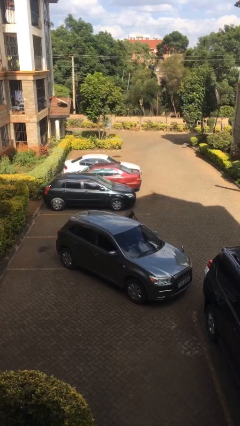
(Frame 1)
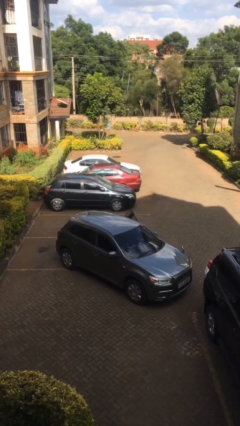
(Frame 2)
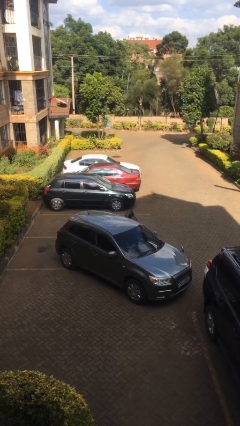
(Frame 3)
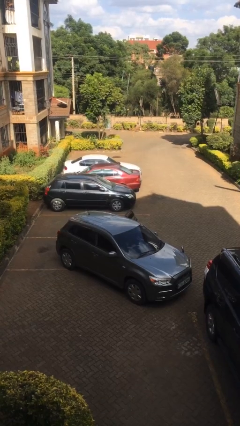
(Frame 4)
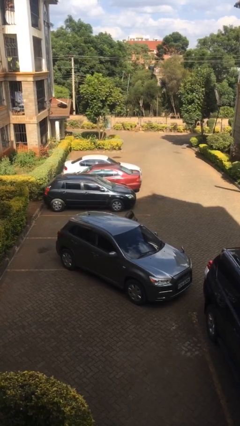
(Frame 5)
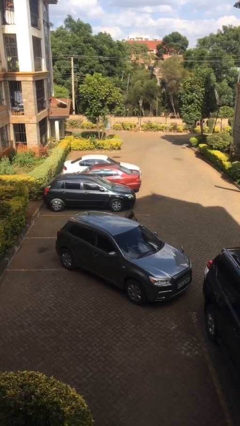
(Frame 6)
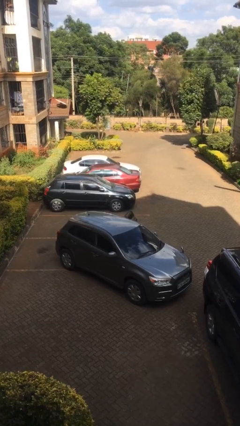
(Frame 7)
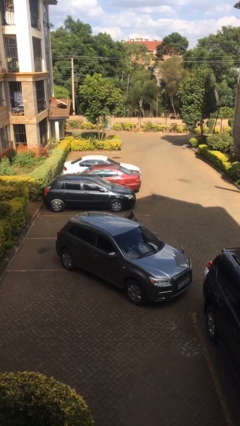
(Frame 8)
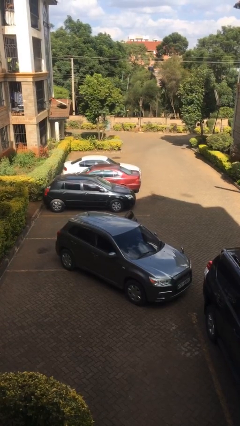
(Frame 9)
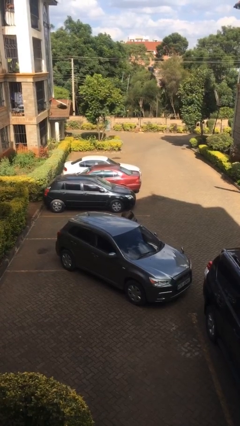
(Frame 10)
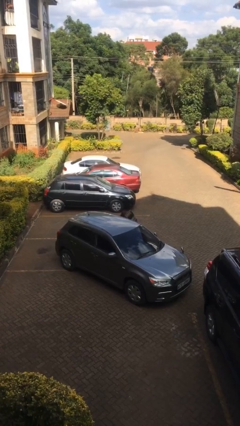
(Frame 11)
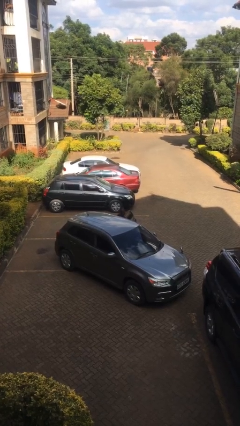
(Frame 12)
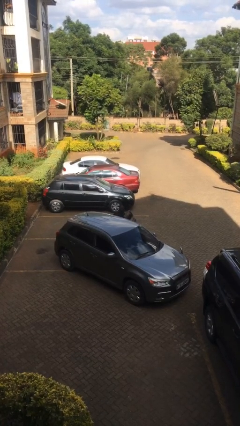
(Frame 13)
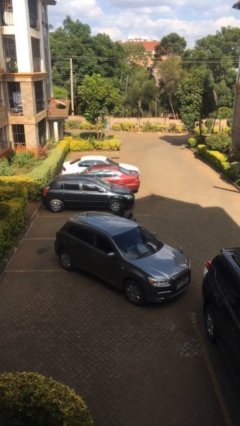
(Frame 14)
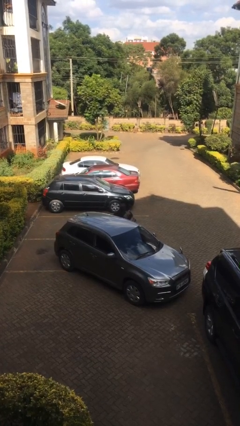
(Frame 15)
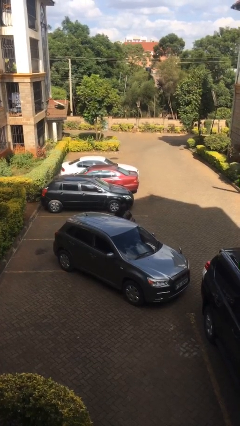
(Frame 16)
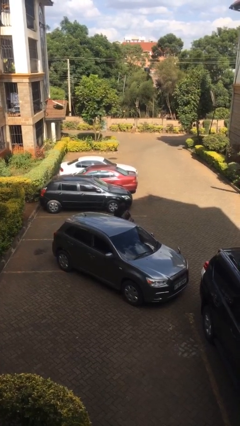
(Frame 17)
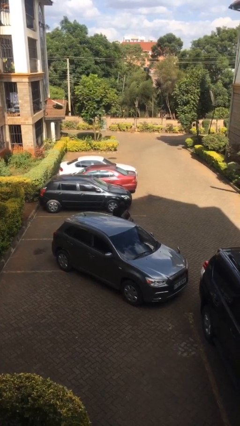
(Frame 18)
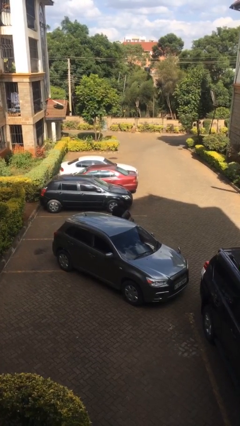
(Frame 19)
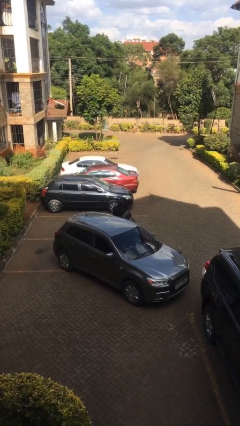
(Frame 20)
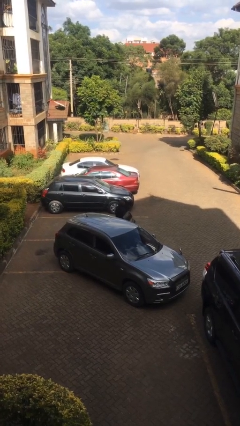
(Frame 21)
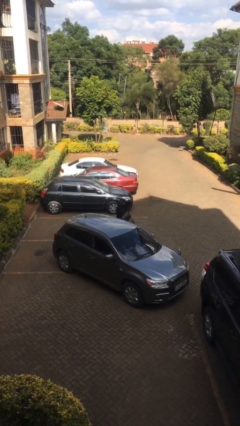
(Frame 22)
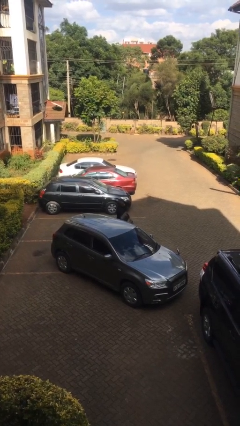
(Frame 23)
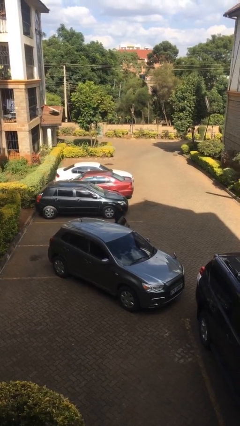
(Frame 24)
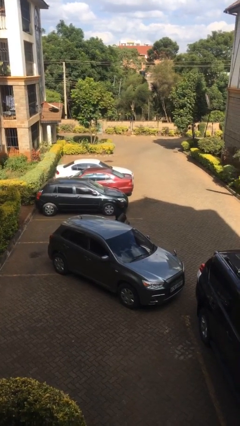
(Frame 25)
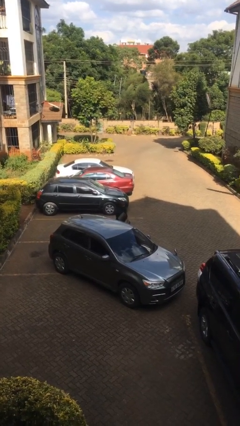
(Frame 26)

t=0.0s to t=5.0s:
person exits car

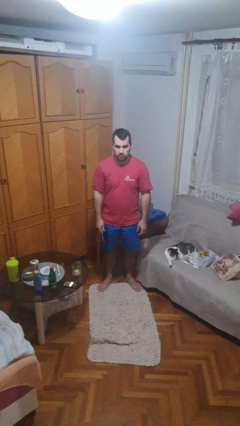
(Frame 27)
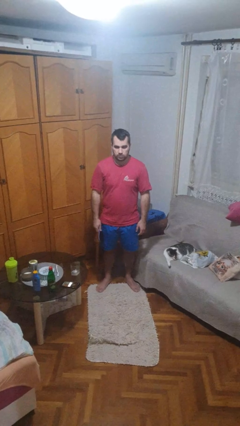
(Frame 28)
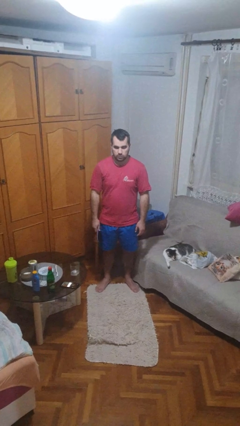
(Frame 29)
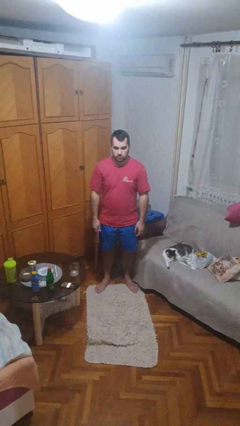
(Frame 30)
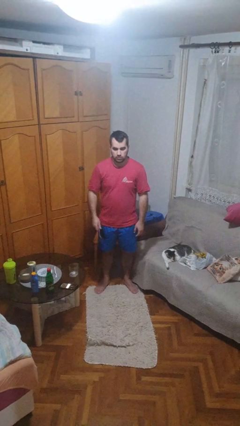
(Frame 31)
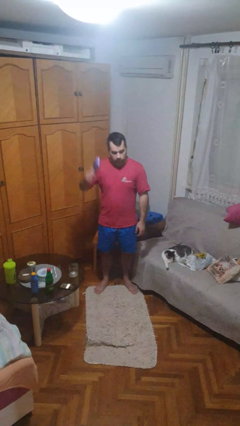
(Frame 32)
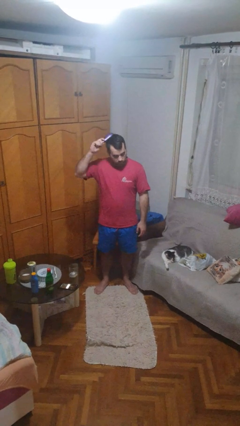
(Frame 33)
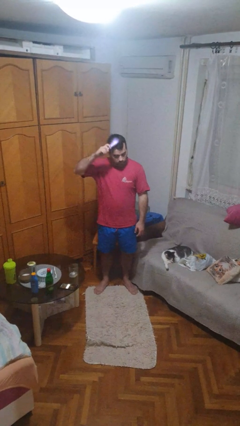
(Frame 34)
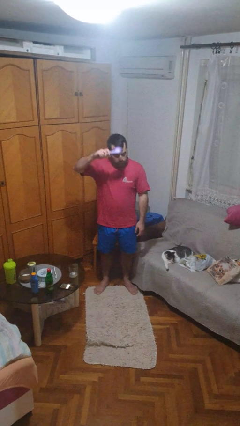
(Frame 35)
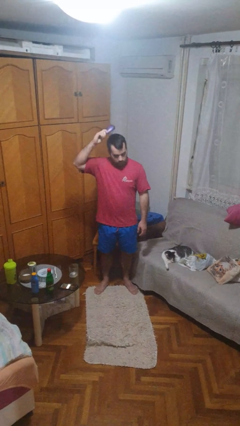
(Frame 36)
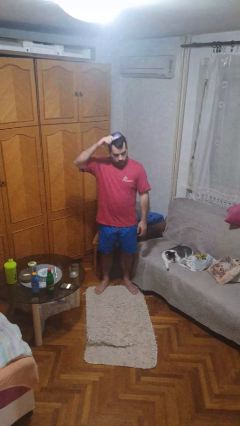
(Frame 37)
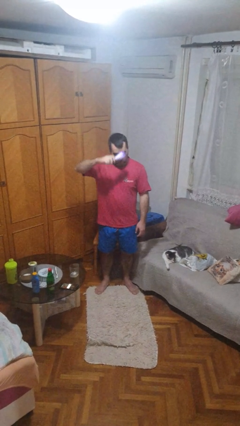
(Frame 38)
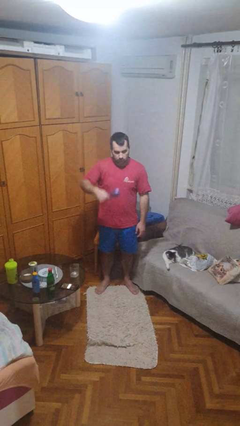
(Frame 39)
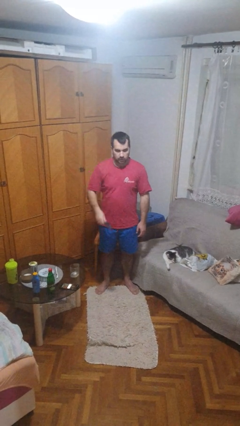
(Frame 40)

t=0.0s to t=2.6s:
person brushes hair

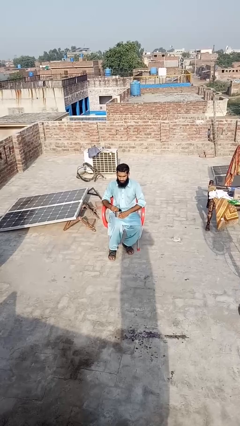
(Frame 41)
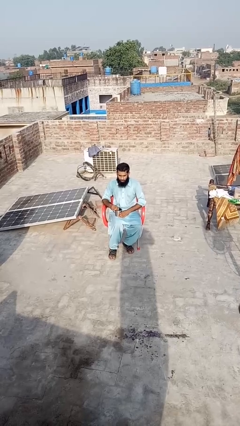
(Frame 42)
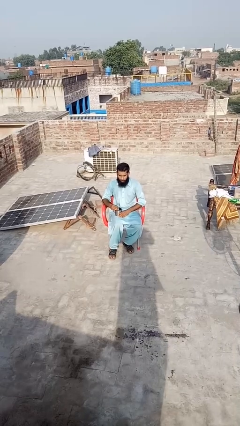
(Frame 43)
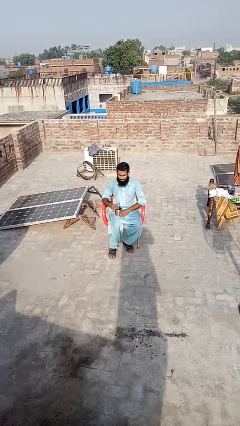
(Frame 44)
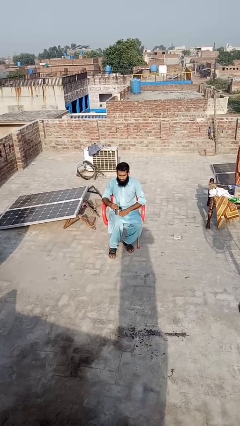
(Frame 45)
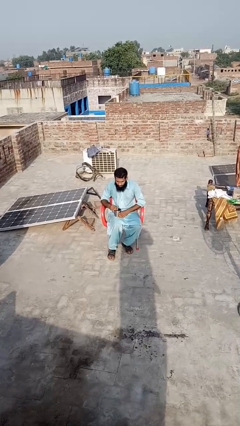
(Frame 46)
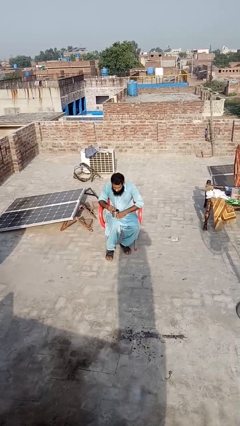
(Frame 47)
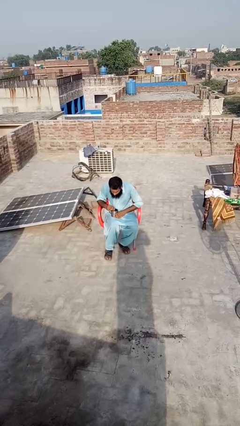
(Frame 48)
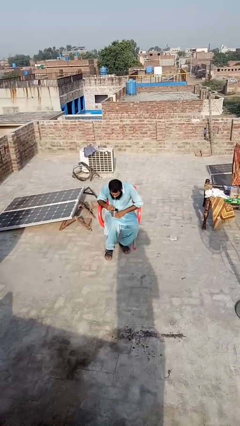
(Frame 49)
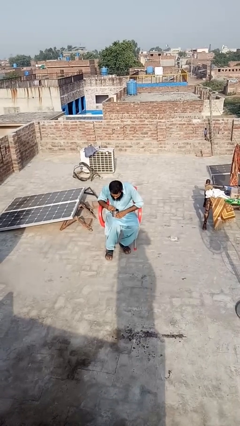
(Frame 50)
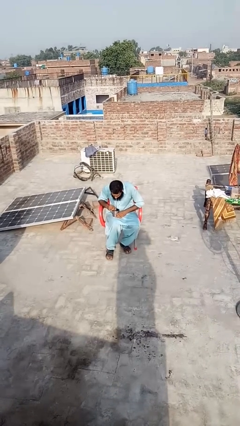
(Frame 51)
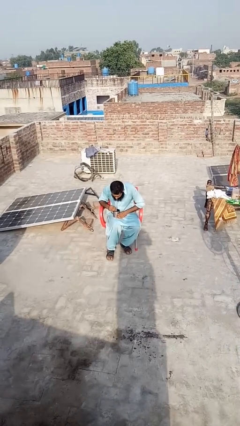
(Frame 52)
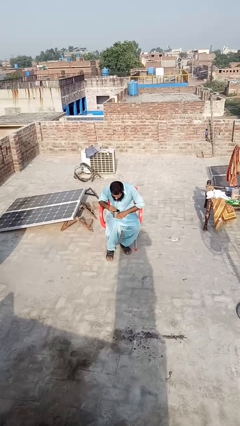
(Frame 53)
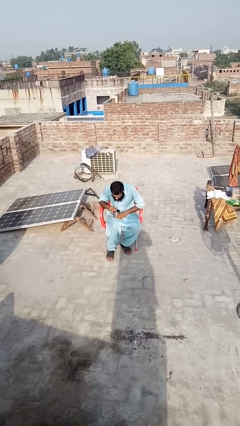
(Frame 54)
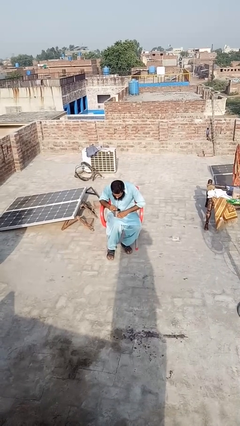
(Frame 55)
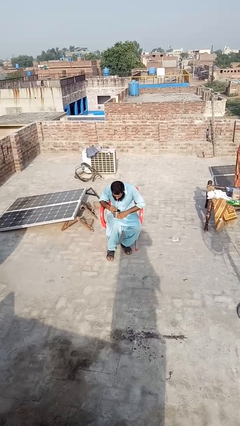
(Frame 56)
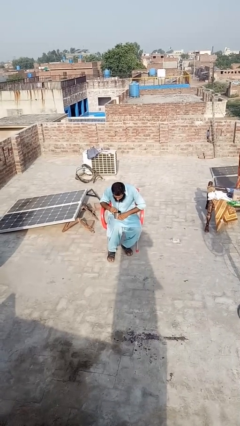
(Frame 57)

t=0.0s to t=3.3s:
person drinks from straw

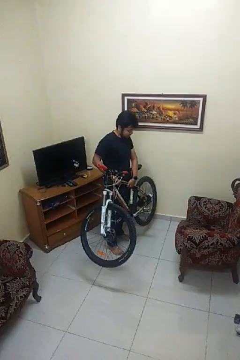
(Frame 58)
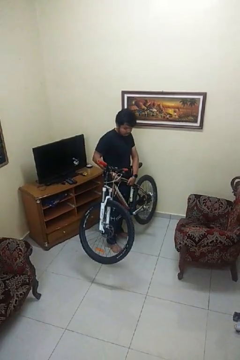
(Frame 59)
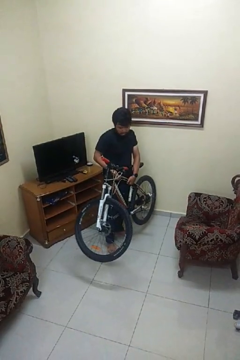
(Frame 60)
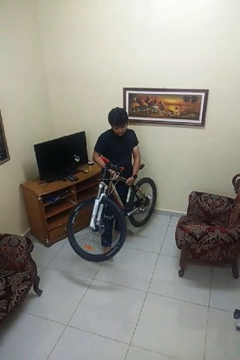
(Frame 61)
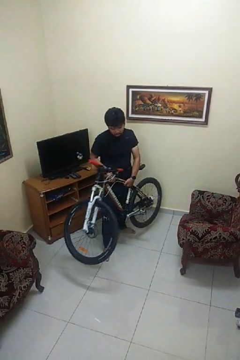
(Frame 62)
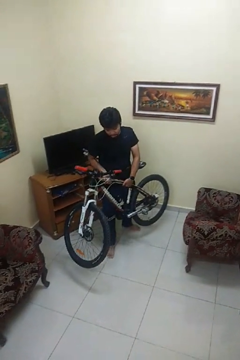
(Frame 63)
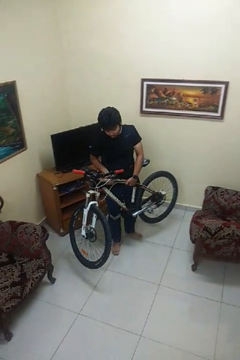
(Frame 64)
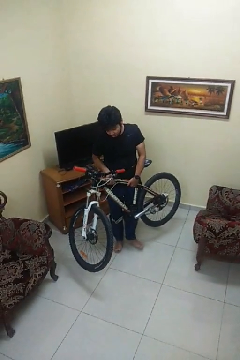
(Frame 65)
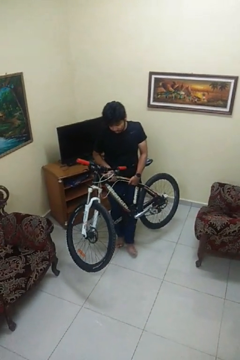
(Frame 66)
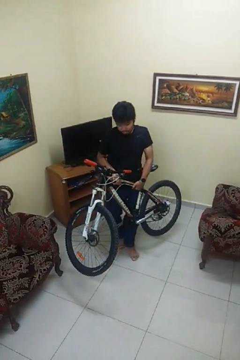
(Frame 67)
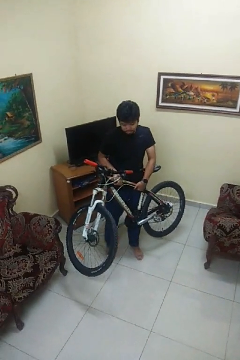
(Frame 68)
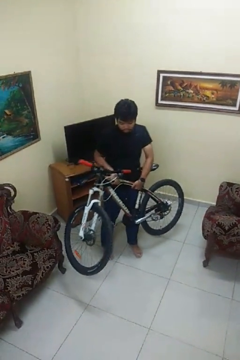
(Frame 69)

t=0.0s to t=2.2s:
person carries bicycle

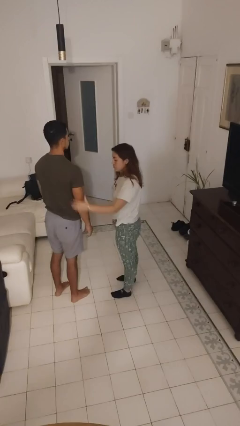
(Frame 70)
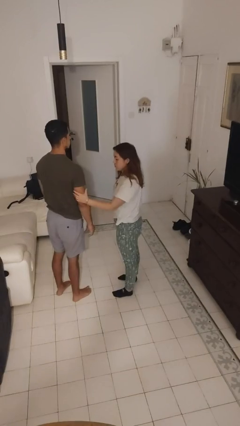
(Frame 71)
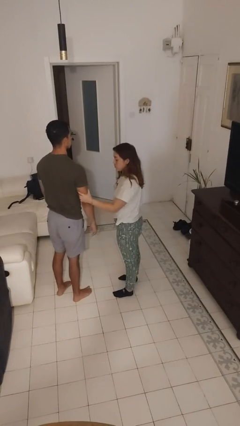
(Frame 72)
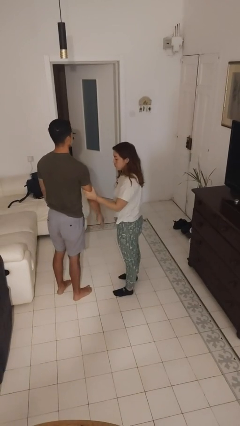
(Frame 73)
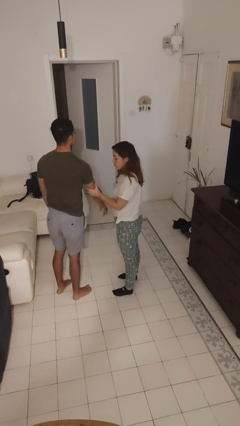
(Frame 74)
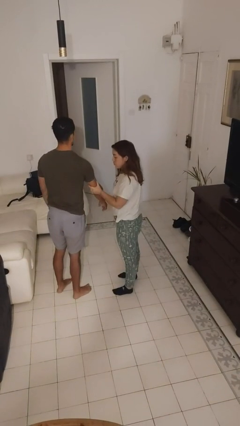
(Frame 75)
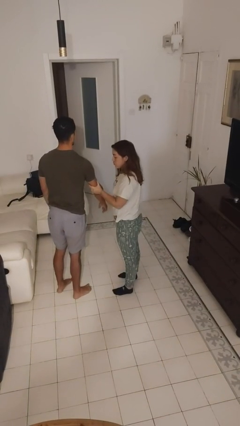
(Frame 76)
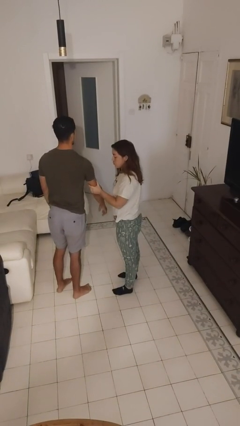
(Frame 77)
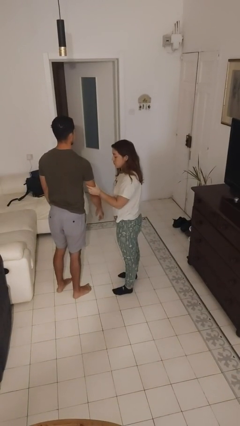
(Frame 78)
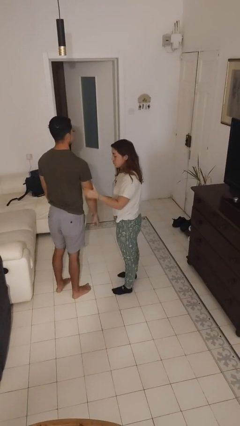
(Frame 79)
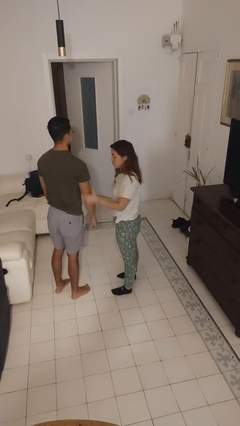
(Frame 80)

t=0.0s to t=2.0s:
person grabs person by bicep

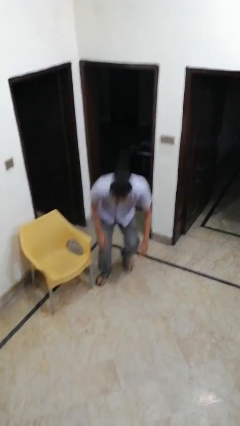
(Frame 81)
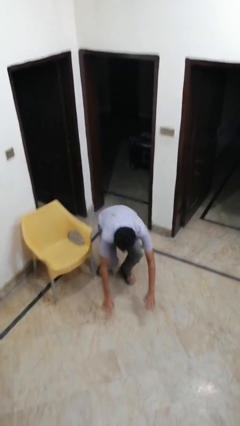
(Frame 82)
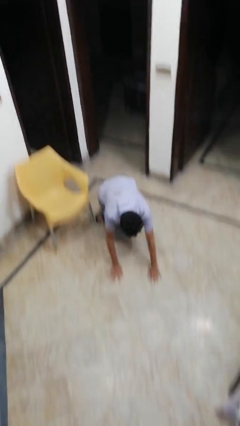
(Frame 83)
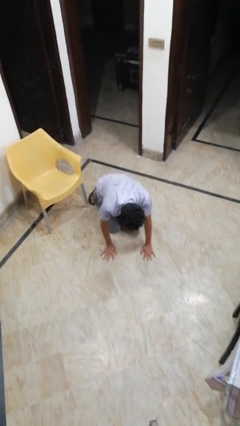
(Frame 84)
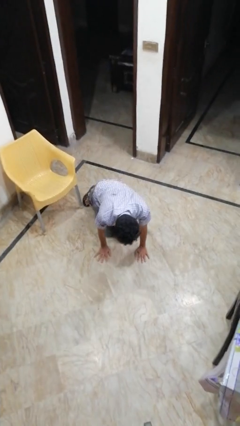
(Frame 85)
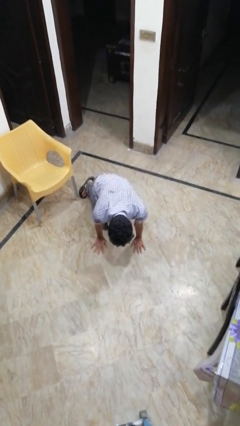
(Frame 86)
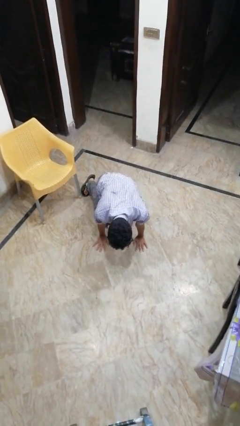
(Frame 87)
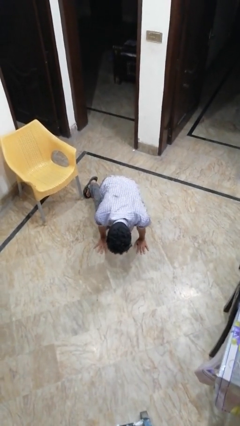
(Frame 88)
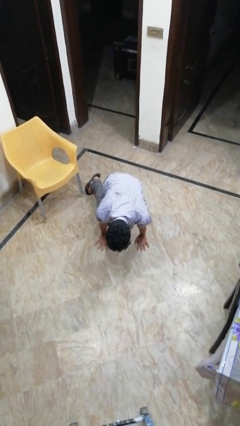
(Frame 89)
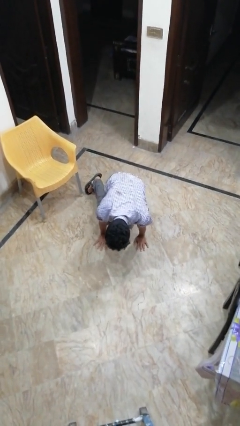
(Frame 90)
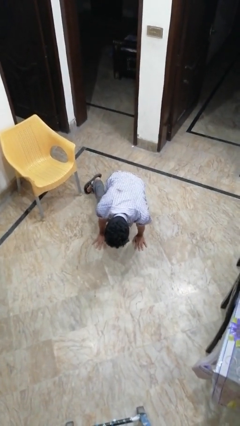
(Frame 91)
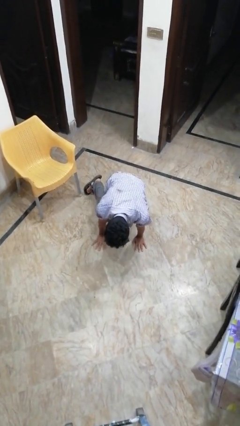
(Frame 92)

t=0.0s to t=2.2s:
person trips on object on floor
